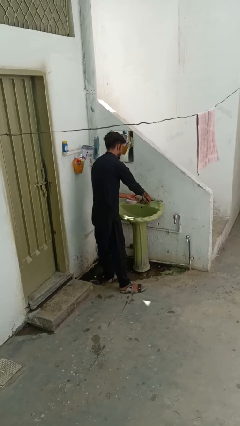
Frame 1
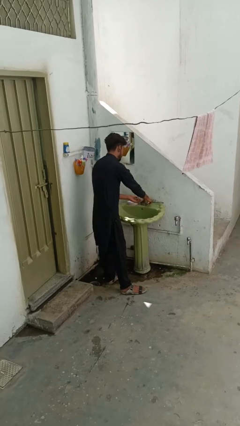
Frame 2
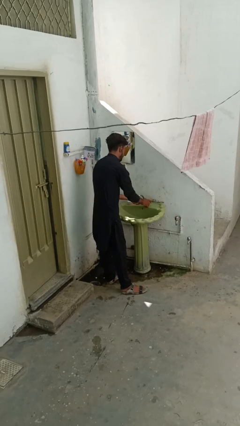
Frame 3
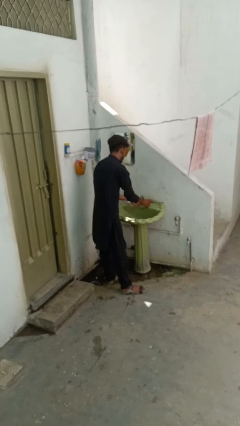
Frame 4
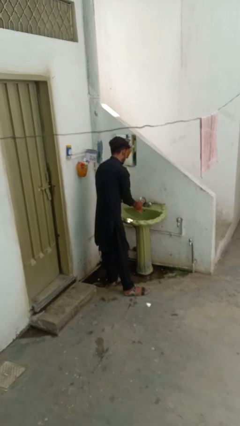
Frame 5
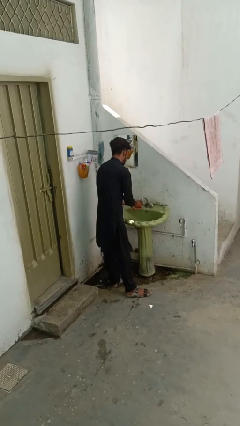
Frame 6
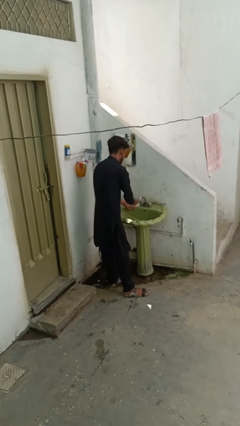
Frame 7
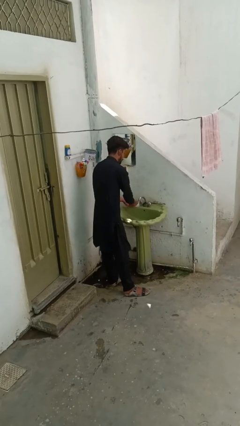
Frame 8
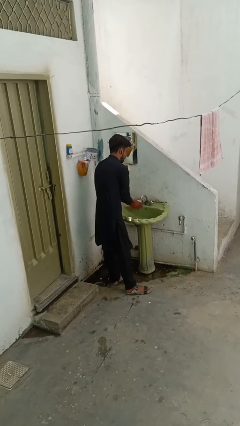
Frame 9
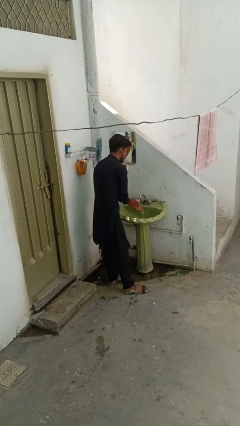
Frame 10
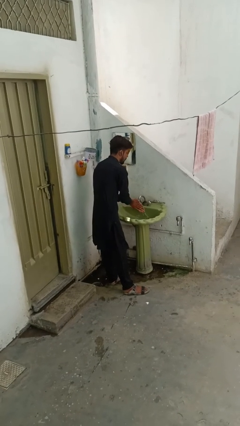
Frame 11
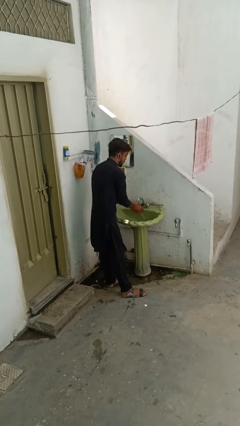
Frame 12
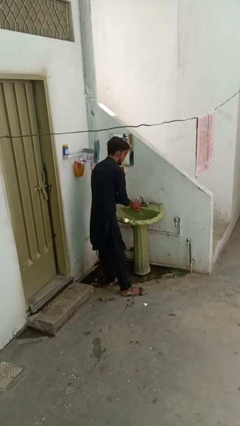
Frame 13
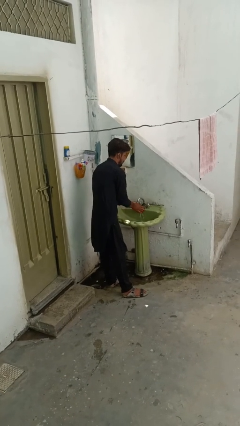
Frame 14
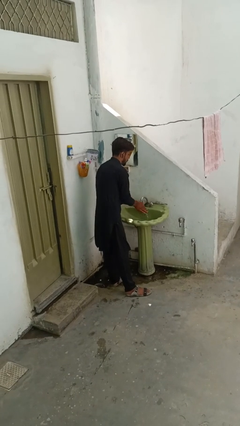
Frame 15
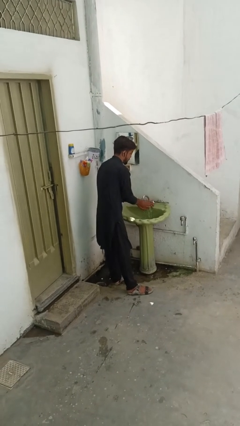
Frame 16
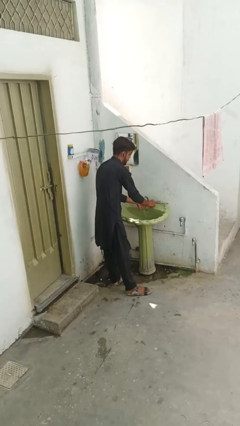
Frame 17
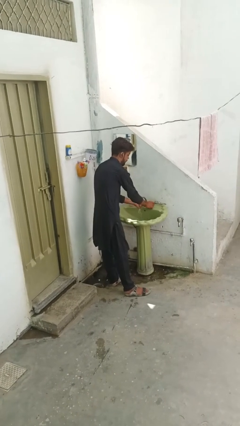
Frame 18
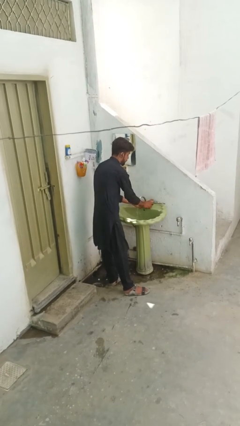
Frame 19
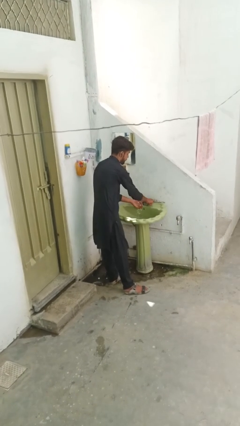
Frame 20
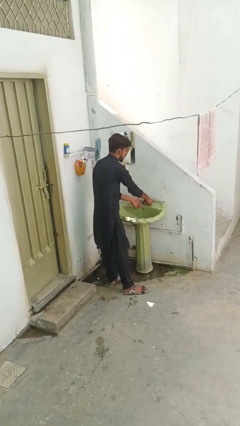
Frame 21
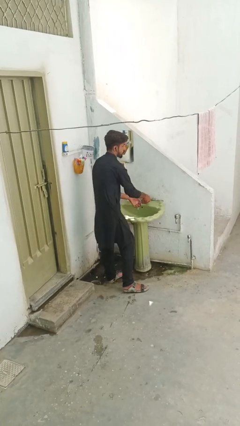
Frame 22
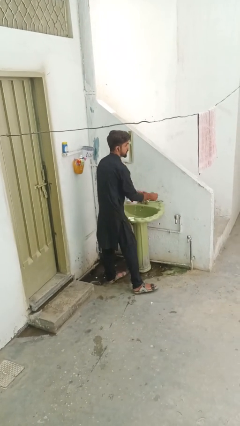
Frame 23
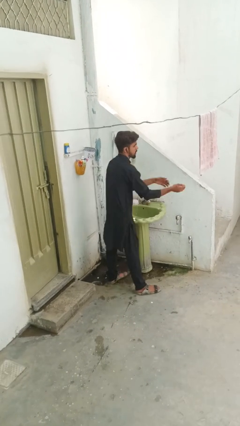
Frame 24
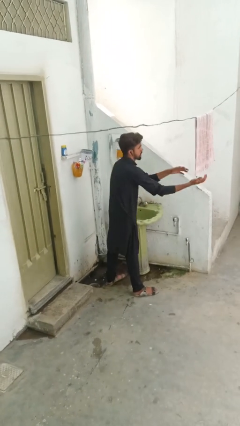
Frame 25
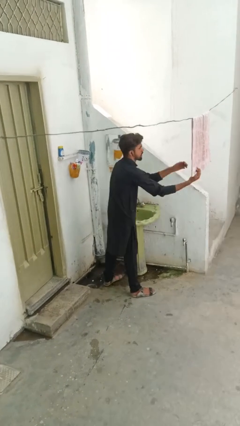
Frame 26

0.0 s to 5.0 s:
person washes hands

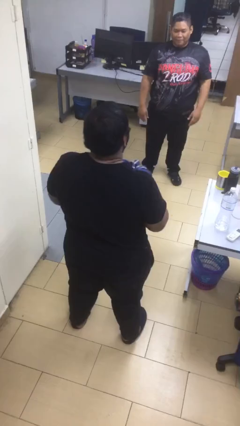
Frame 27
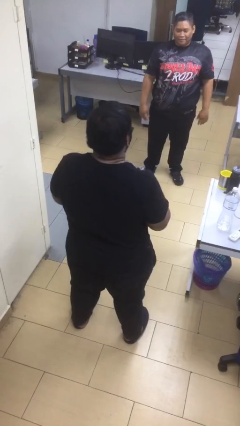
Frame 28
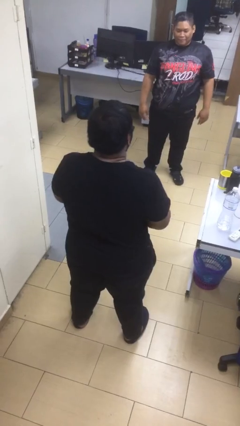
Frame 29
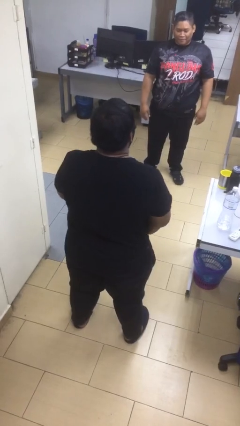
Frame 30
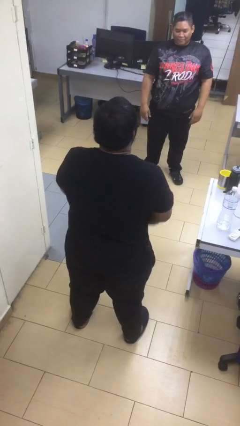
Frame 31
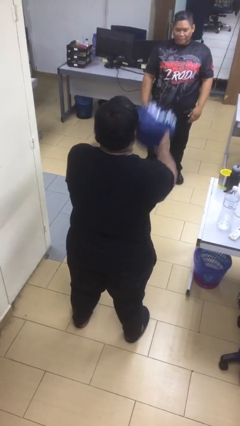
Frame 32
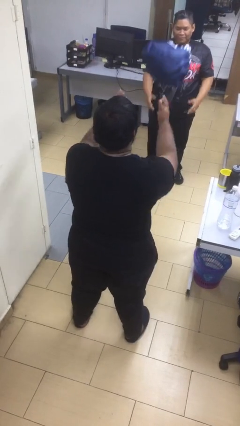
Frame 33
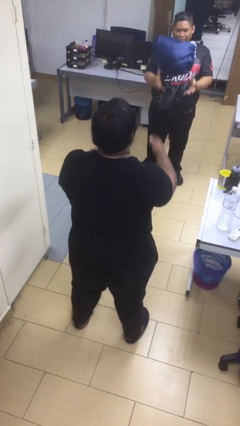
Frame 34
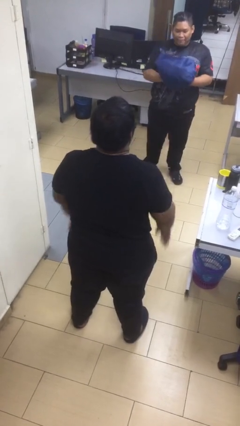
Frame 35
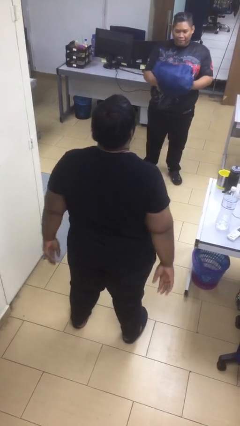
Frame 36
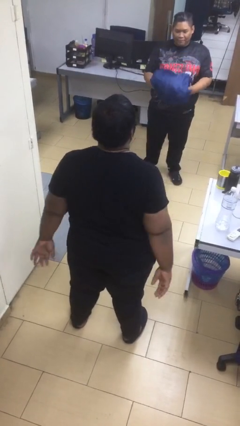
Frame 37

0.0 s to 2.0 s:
person throws object to person

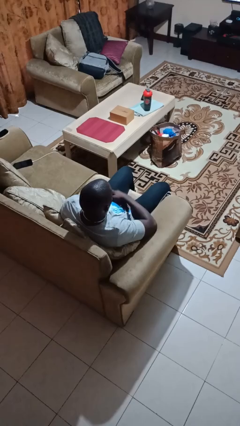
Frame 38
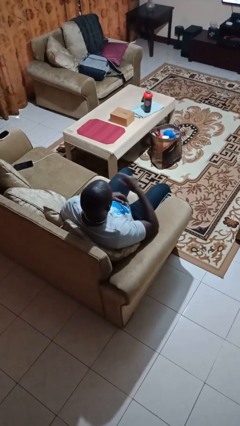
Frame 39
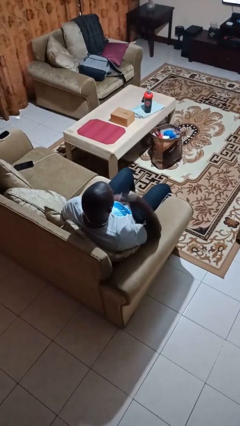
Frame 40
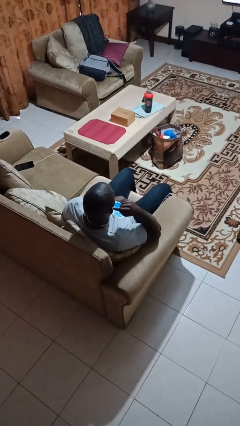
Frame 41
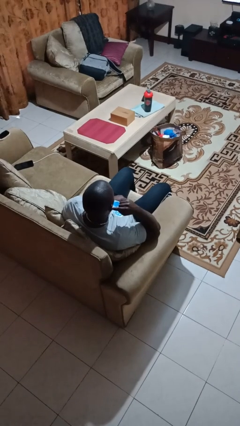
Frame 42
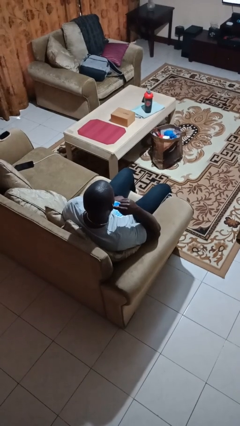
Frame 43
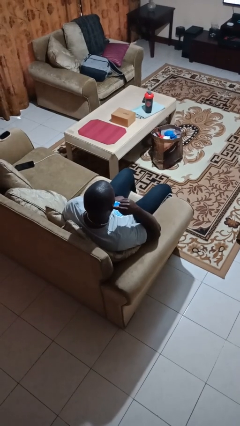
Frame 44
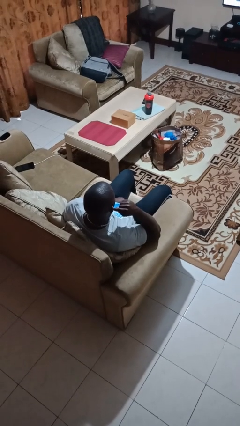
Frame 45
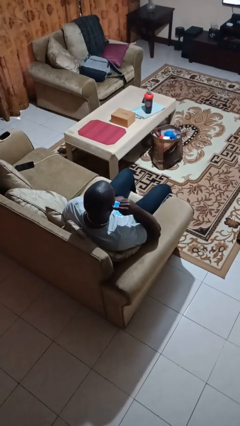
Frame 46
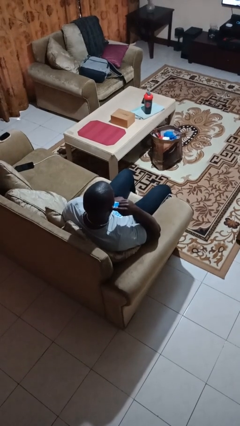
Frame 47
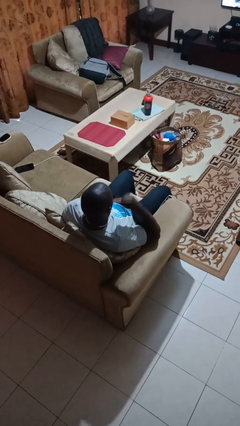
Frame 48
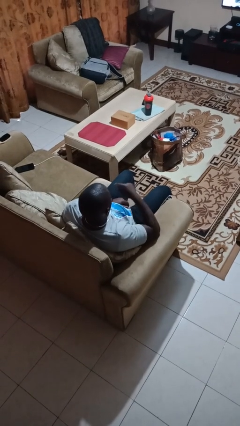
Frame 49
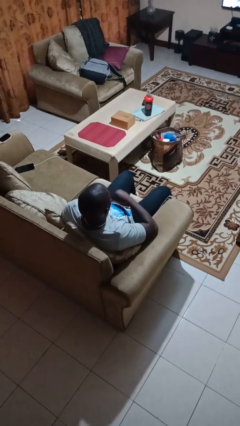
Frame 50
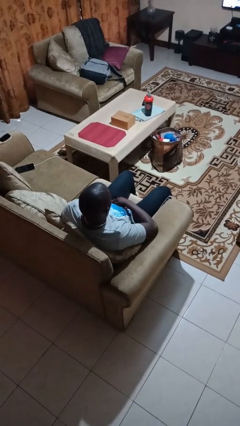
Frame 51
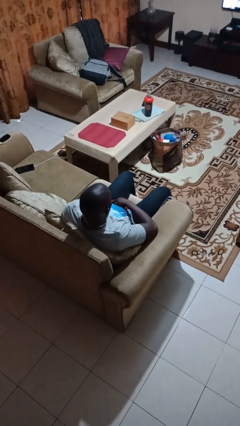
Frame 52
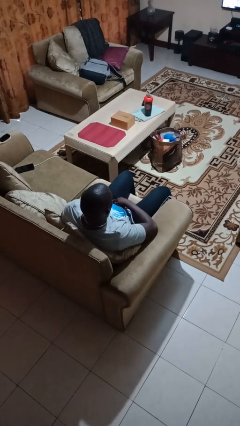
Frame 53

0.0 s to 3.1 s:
person gestures listen closely

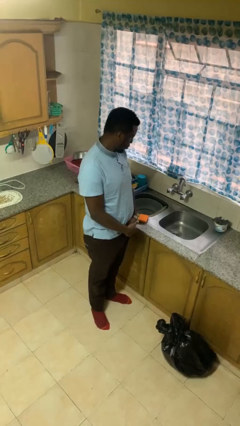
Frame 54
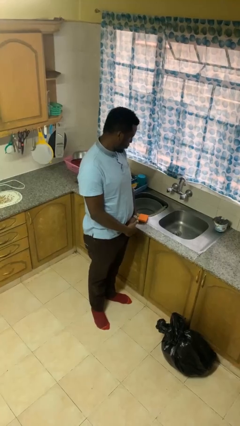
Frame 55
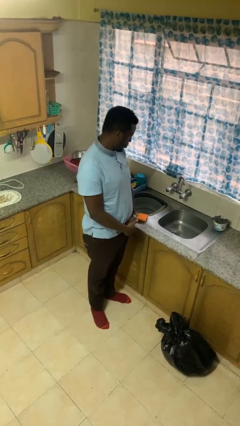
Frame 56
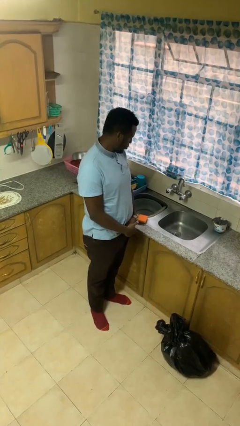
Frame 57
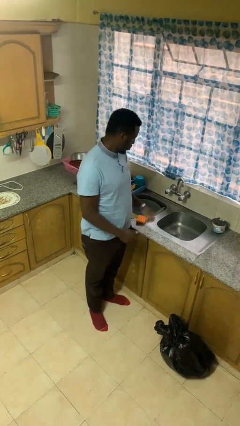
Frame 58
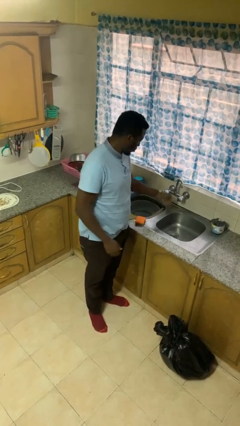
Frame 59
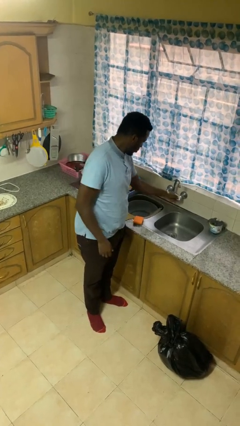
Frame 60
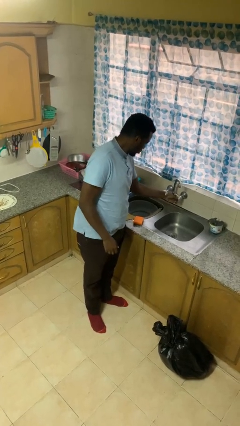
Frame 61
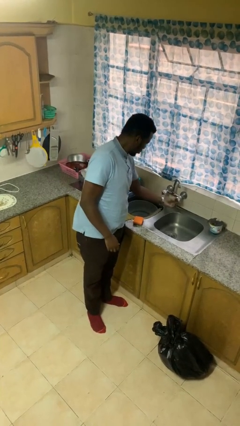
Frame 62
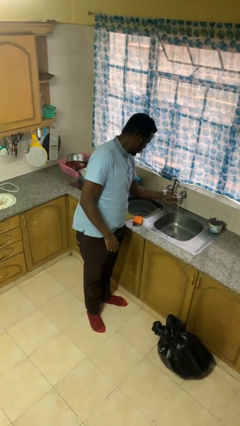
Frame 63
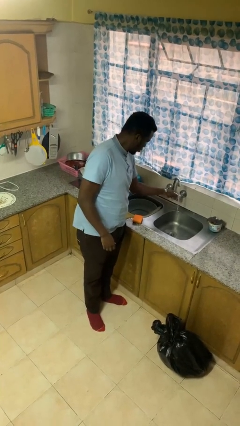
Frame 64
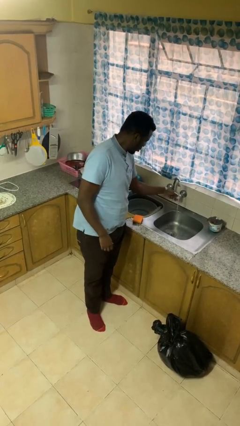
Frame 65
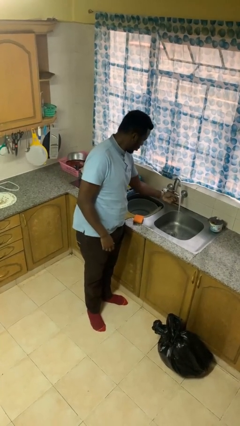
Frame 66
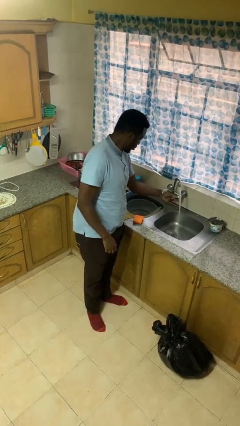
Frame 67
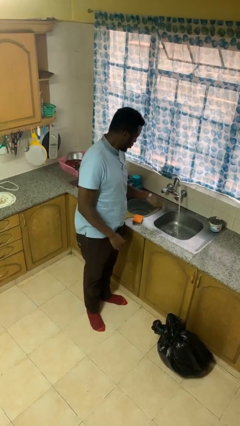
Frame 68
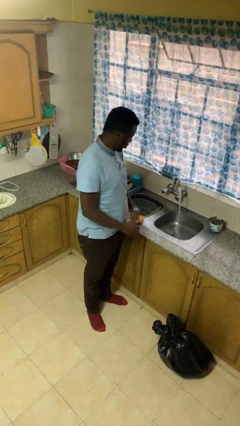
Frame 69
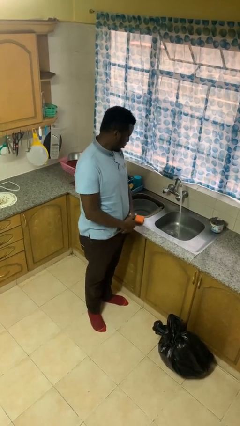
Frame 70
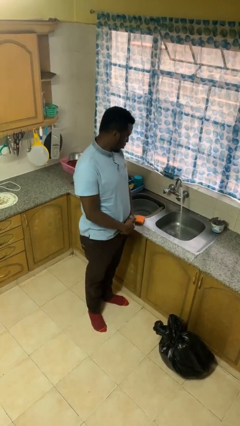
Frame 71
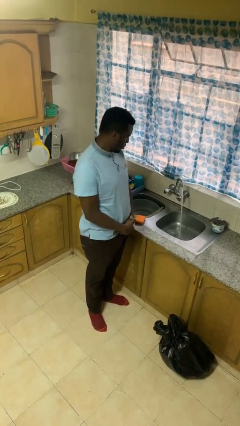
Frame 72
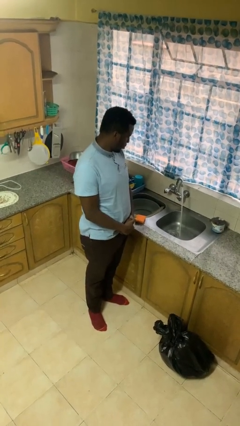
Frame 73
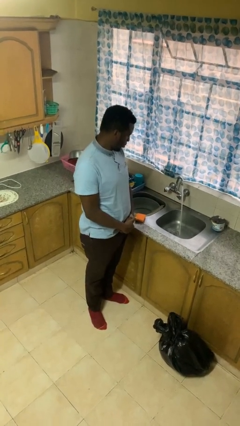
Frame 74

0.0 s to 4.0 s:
person turns on faucet

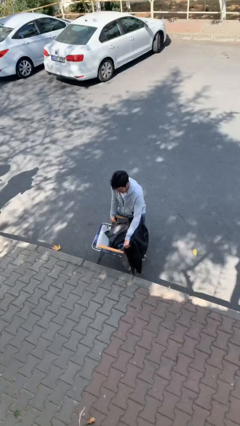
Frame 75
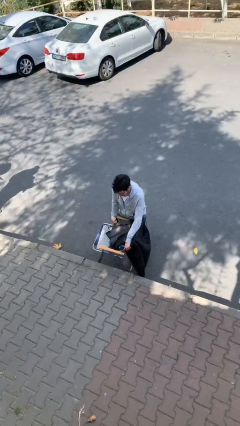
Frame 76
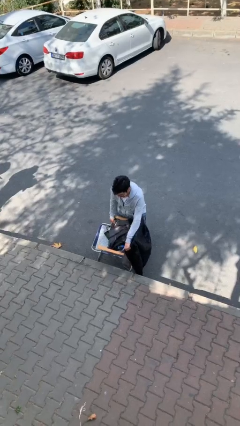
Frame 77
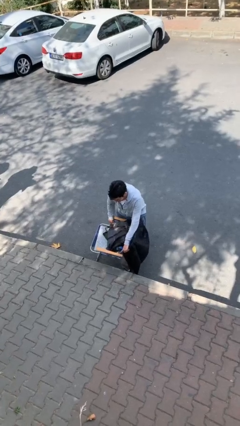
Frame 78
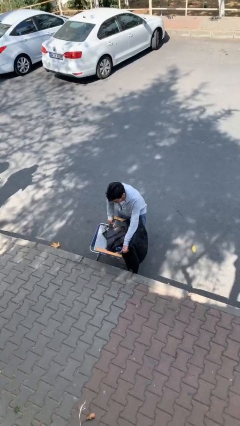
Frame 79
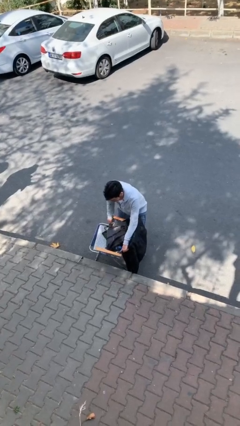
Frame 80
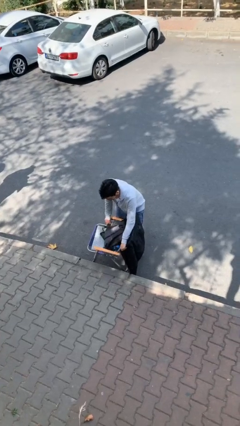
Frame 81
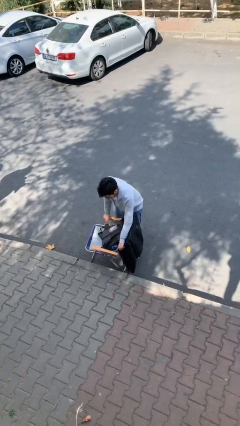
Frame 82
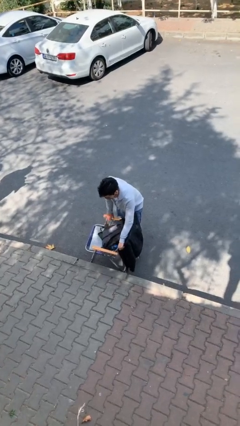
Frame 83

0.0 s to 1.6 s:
person puts down object on floor

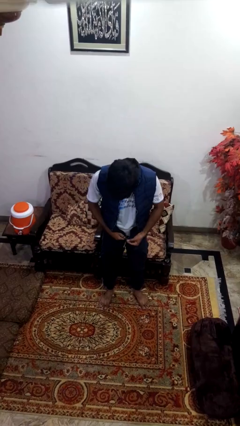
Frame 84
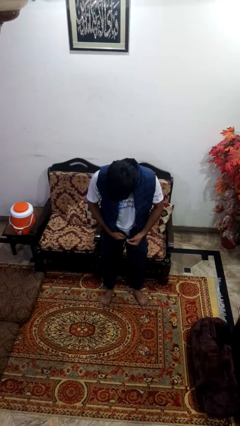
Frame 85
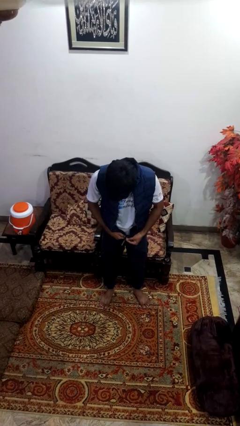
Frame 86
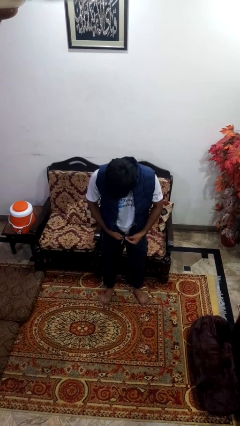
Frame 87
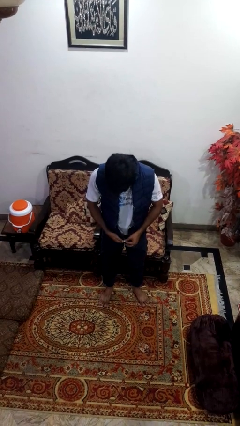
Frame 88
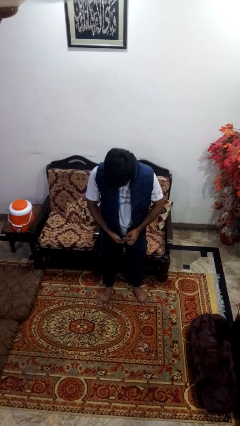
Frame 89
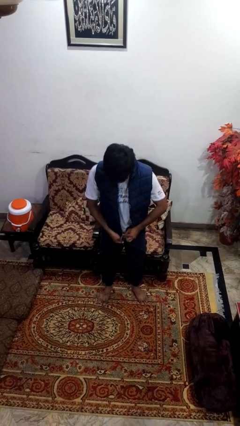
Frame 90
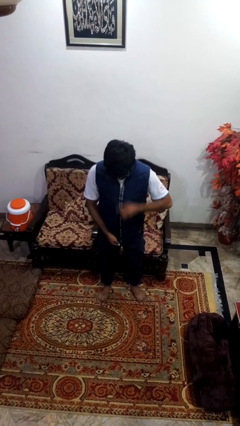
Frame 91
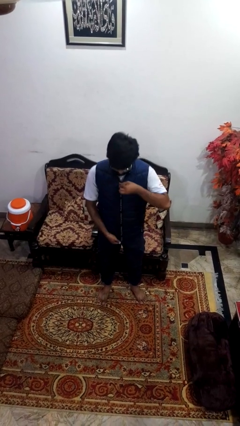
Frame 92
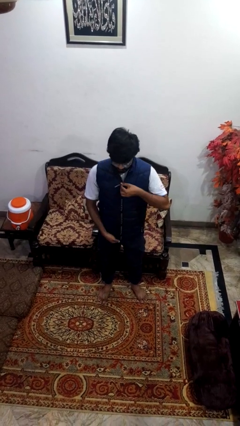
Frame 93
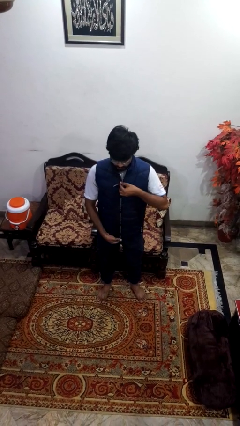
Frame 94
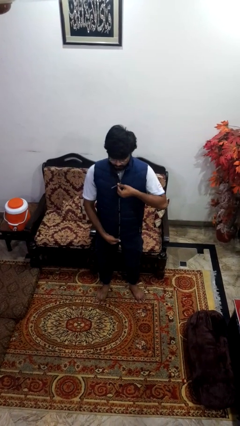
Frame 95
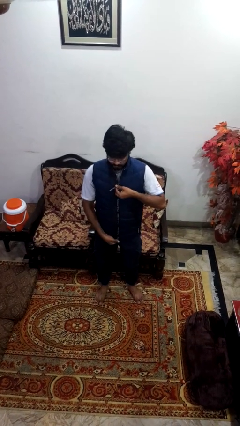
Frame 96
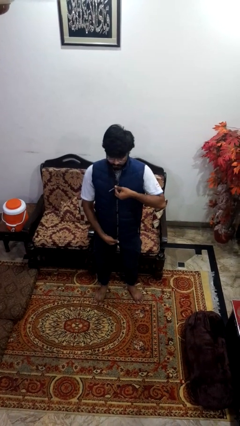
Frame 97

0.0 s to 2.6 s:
person zips up jacket
